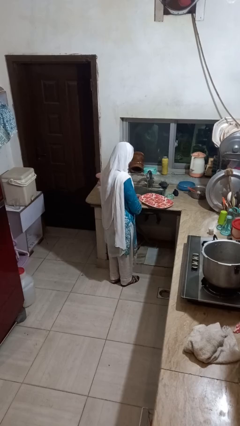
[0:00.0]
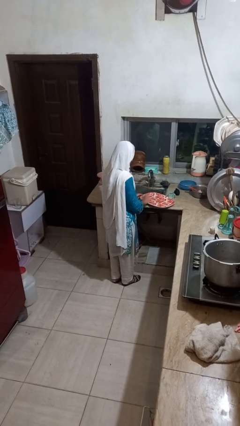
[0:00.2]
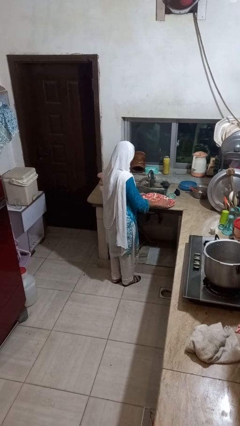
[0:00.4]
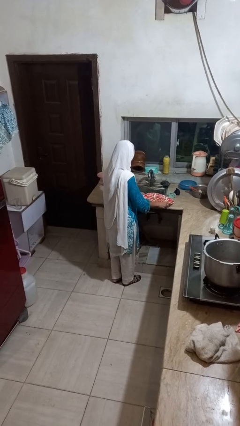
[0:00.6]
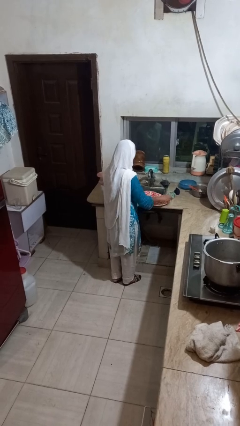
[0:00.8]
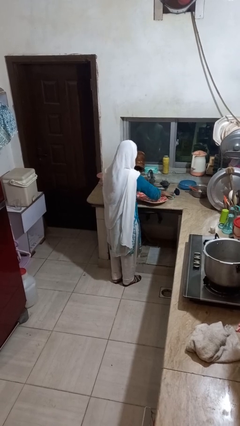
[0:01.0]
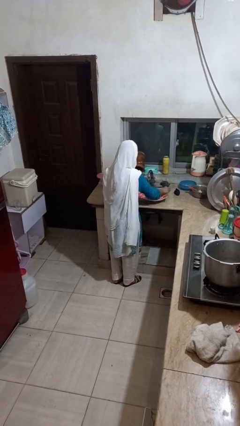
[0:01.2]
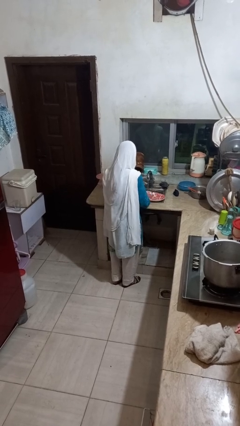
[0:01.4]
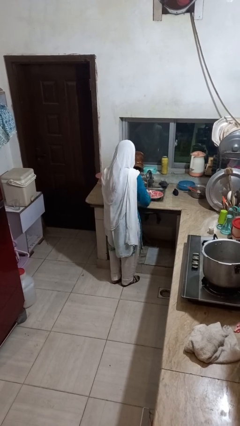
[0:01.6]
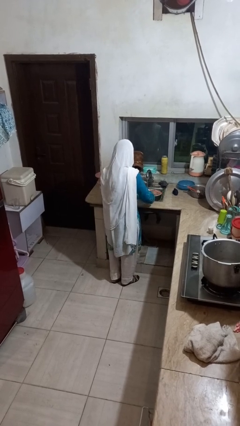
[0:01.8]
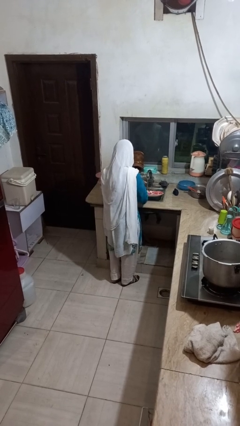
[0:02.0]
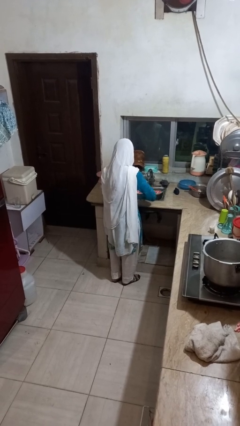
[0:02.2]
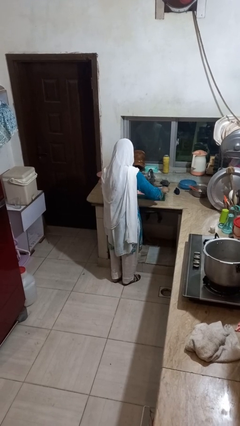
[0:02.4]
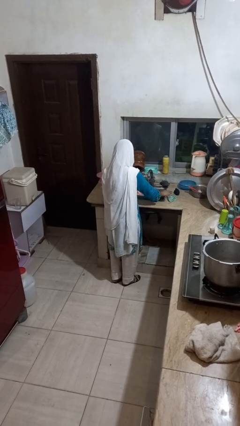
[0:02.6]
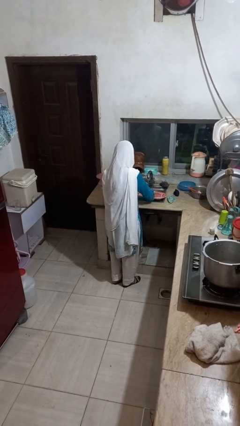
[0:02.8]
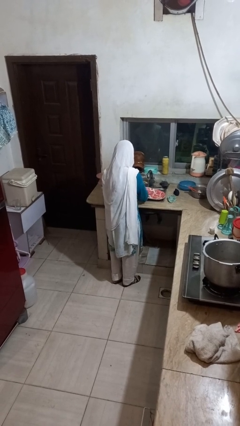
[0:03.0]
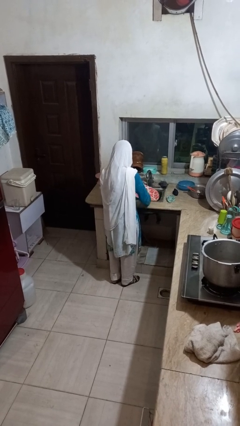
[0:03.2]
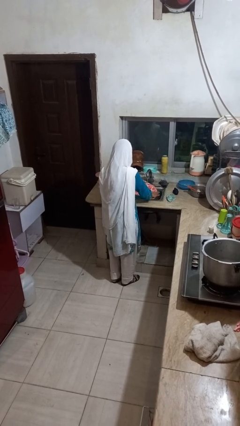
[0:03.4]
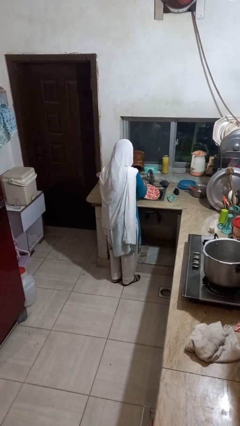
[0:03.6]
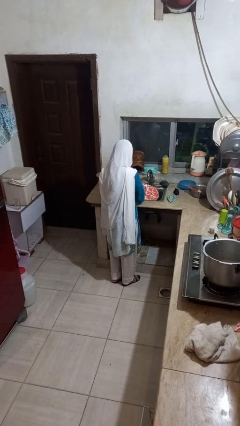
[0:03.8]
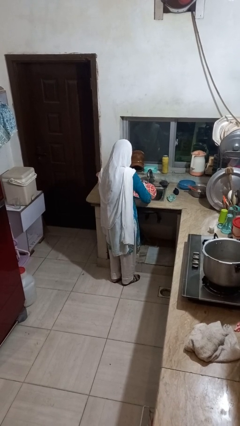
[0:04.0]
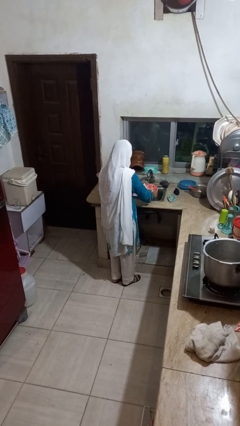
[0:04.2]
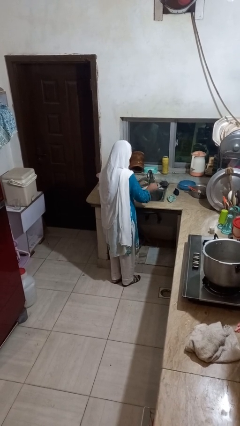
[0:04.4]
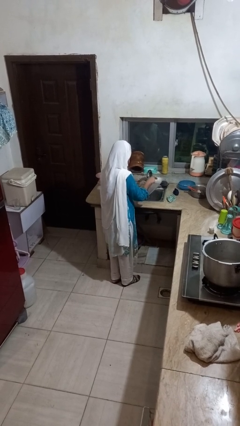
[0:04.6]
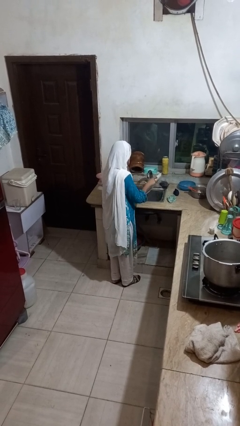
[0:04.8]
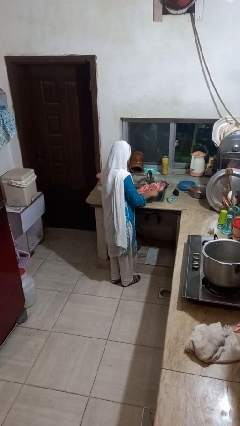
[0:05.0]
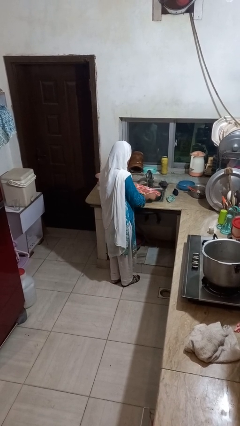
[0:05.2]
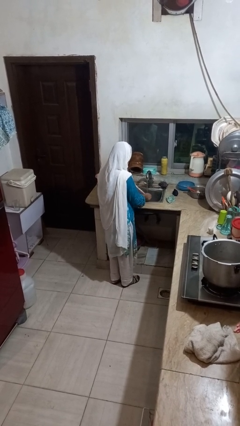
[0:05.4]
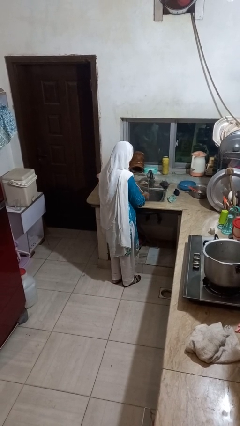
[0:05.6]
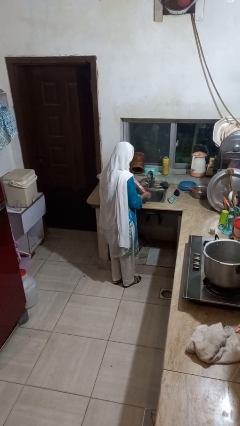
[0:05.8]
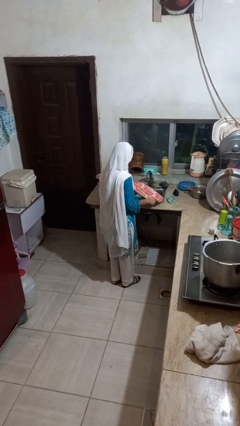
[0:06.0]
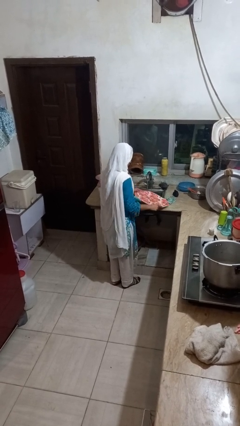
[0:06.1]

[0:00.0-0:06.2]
person washes dish

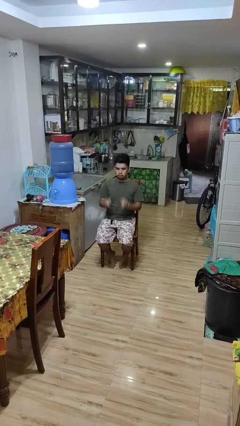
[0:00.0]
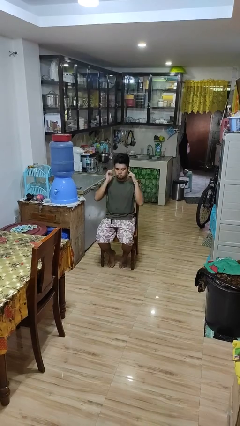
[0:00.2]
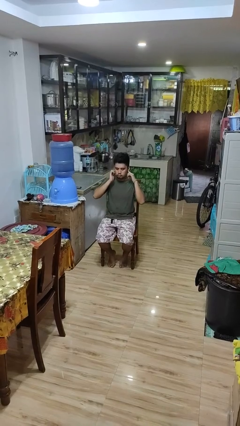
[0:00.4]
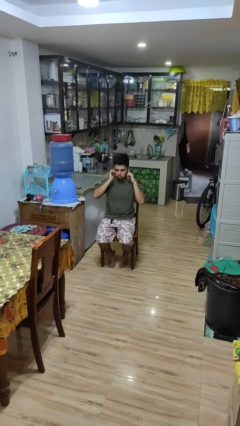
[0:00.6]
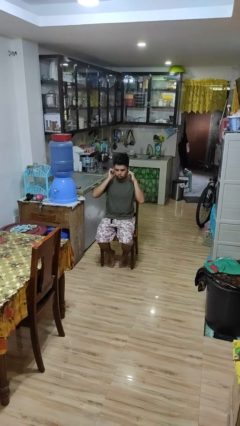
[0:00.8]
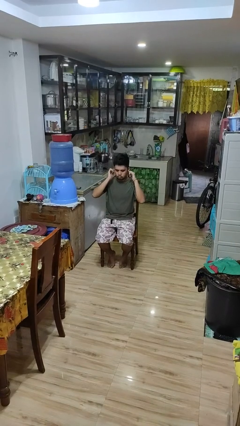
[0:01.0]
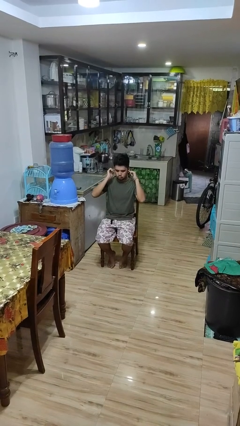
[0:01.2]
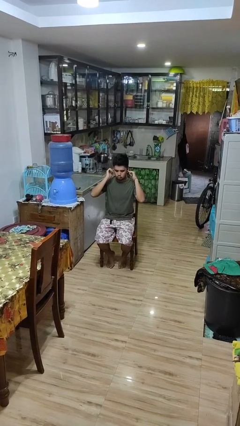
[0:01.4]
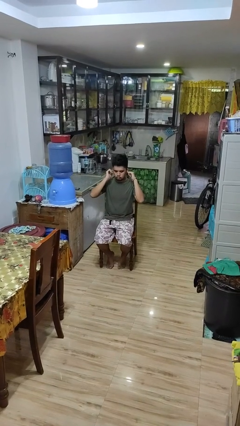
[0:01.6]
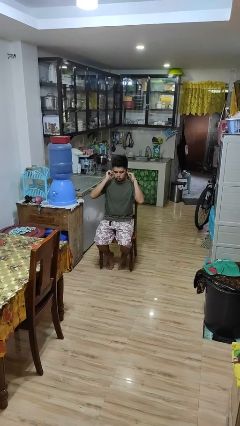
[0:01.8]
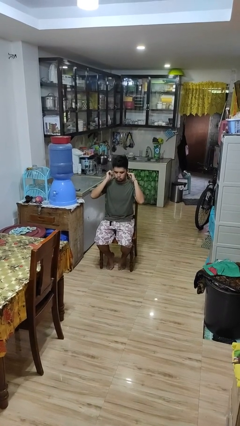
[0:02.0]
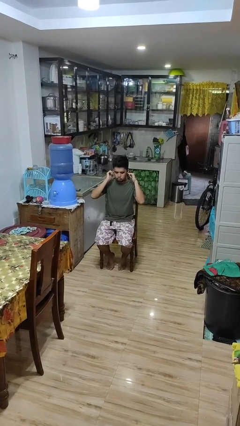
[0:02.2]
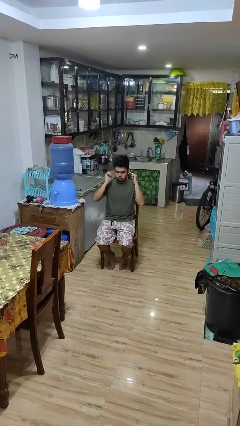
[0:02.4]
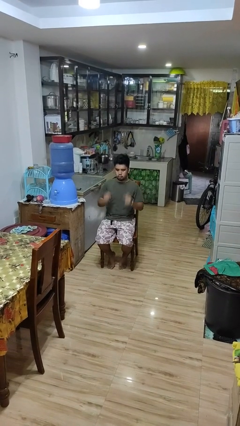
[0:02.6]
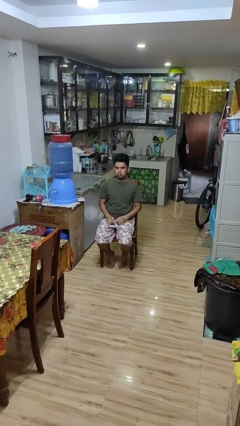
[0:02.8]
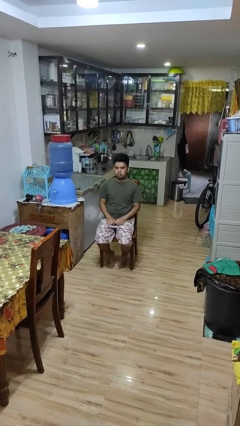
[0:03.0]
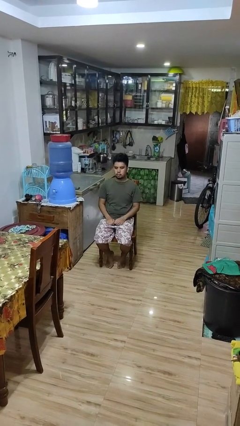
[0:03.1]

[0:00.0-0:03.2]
person puts fingers in ear

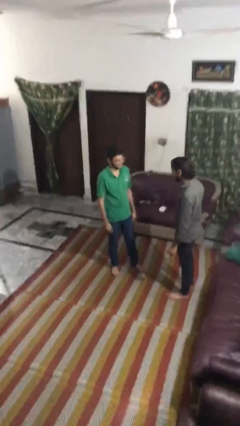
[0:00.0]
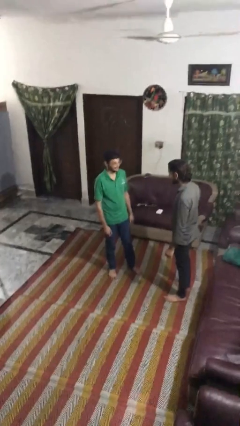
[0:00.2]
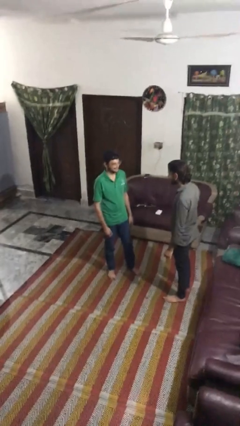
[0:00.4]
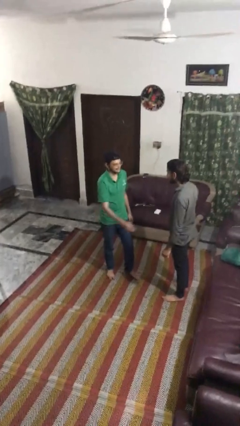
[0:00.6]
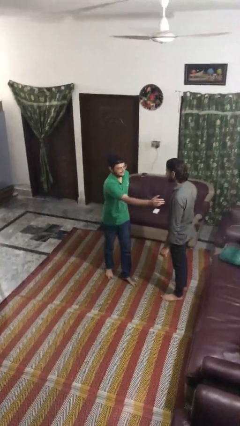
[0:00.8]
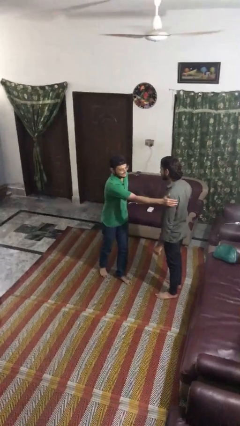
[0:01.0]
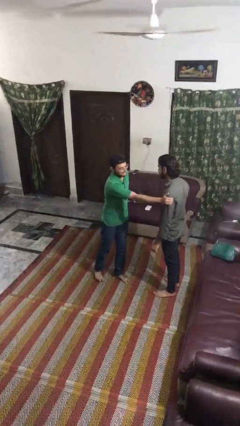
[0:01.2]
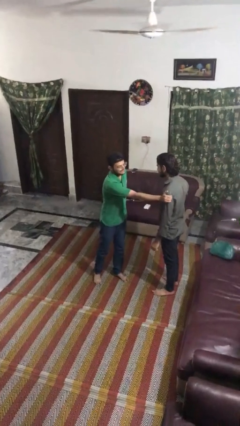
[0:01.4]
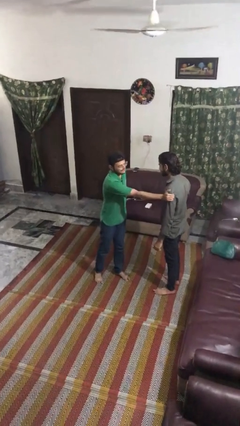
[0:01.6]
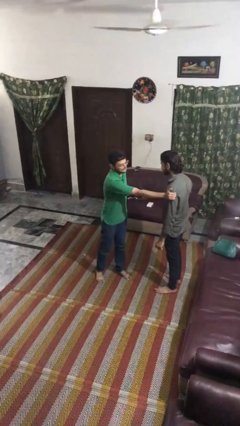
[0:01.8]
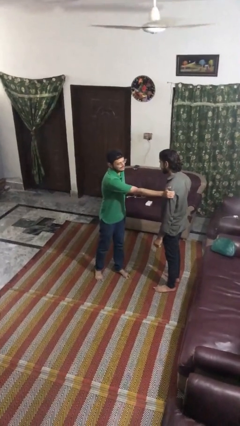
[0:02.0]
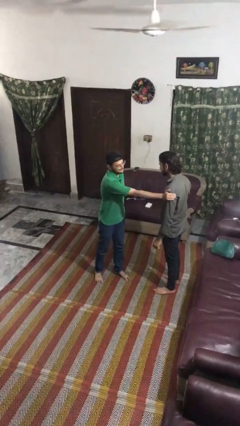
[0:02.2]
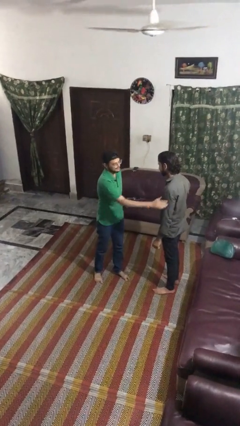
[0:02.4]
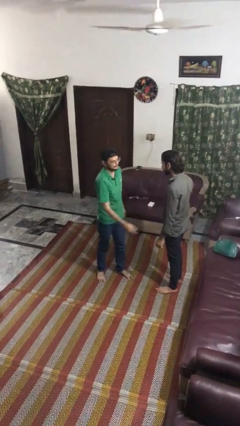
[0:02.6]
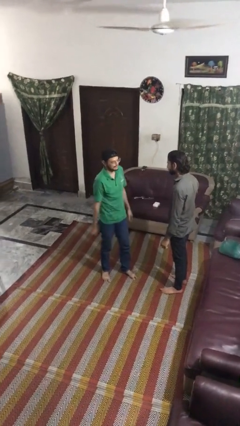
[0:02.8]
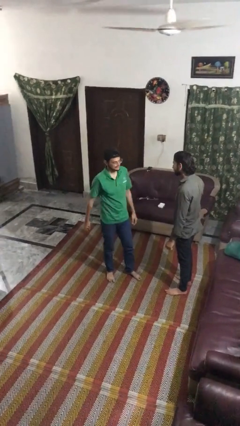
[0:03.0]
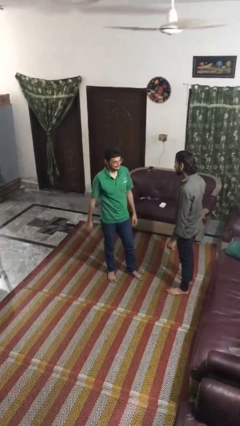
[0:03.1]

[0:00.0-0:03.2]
person grabs person by hair

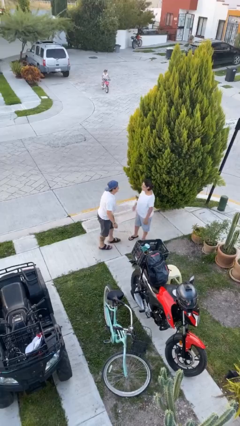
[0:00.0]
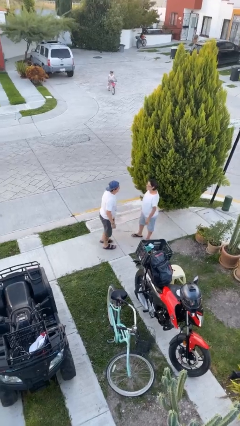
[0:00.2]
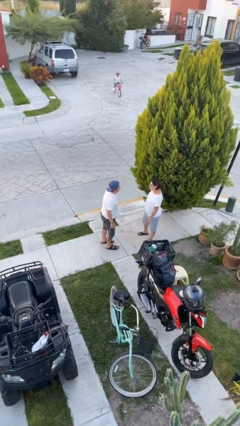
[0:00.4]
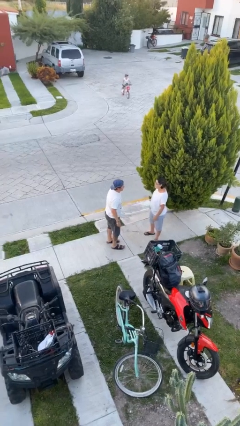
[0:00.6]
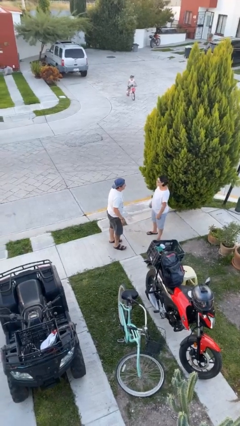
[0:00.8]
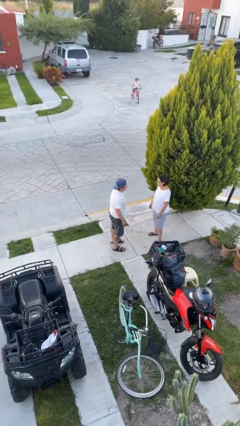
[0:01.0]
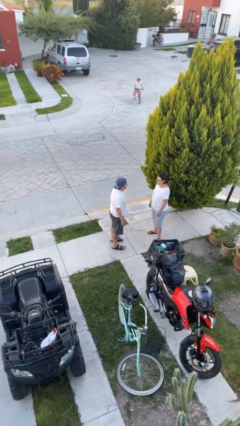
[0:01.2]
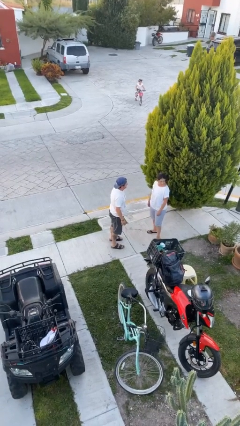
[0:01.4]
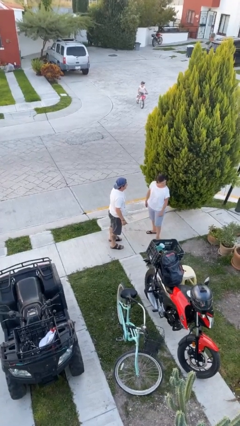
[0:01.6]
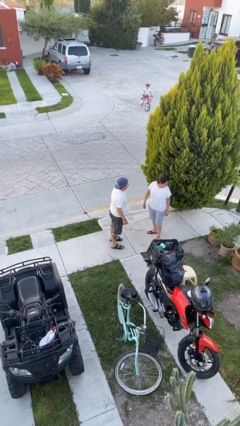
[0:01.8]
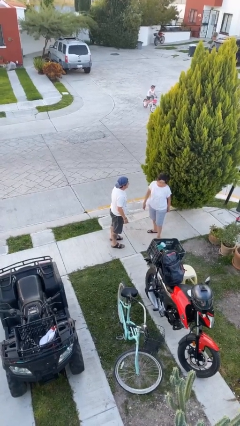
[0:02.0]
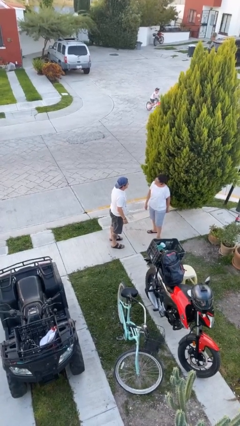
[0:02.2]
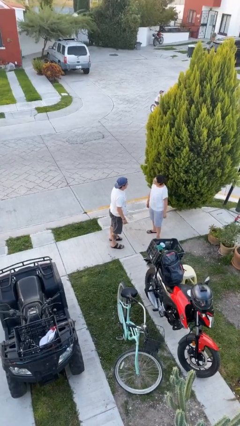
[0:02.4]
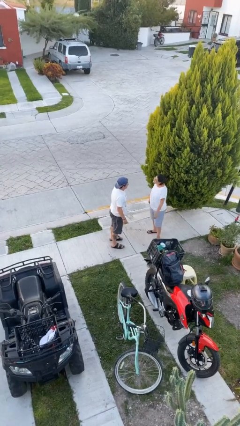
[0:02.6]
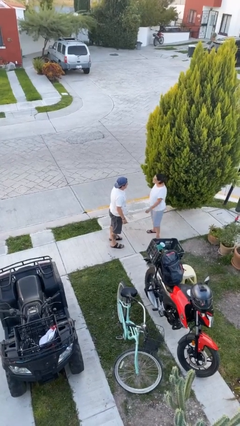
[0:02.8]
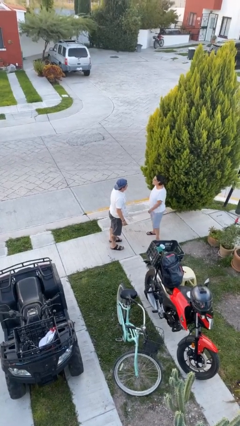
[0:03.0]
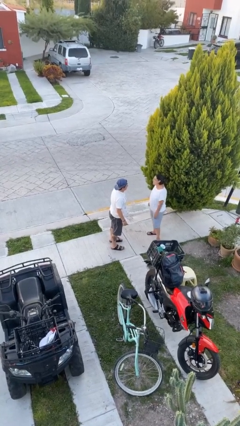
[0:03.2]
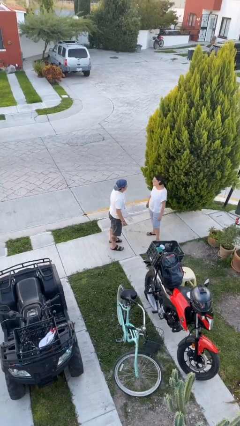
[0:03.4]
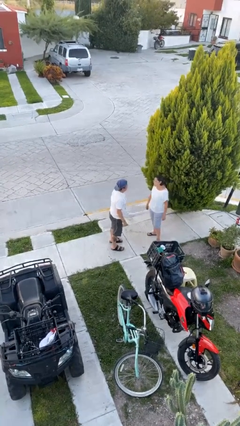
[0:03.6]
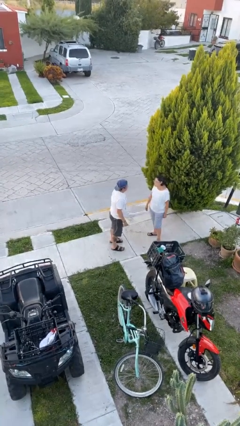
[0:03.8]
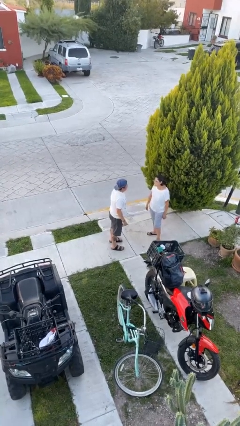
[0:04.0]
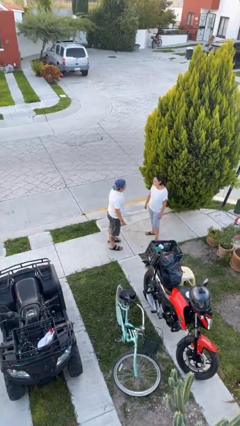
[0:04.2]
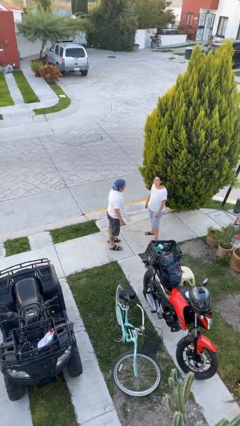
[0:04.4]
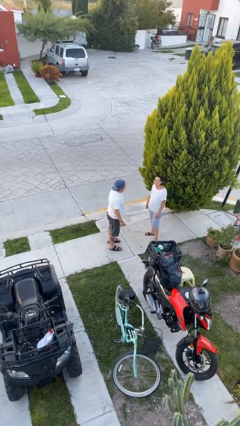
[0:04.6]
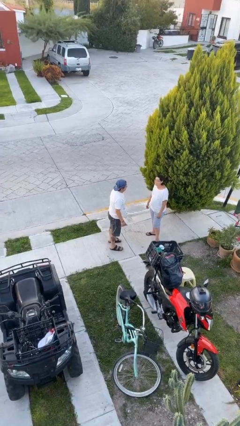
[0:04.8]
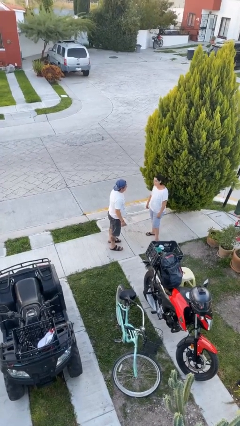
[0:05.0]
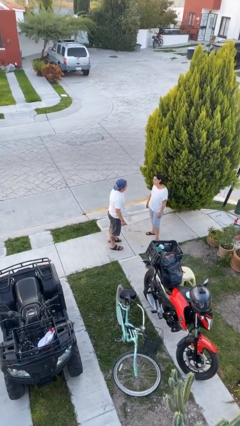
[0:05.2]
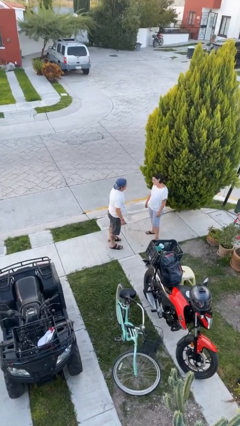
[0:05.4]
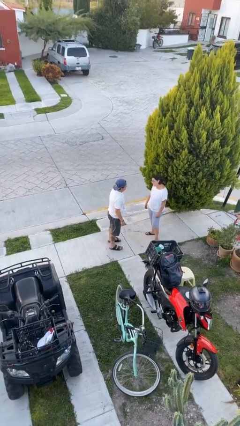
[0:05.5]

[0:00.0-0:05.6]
person talks to person
